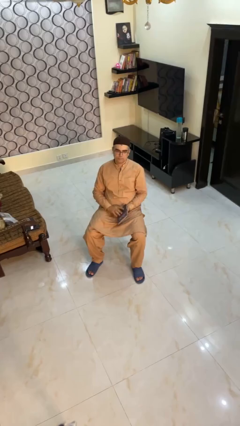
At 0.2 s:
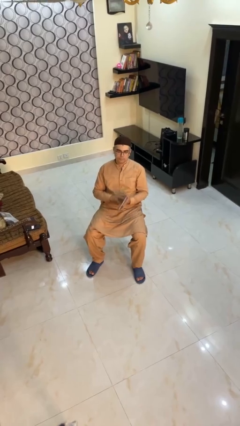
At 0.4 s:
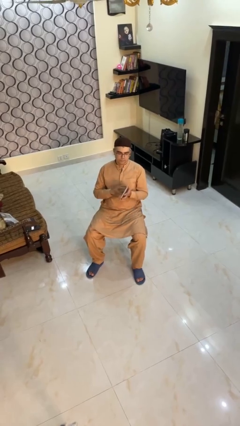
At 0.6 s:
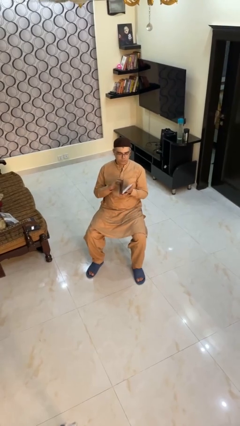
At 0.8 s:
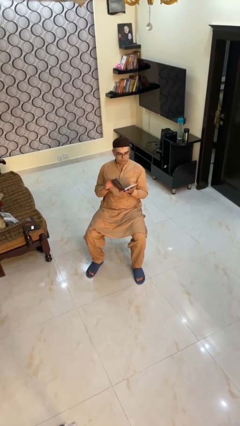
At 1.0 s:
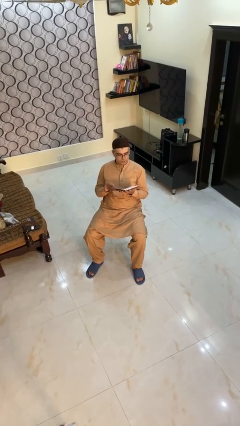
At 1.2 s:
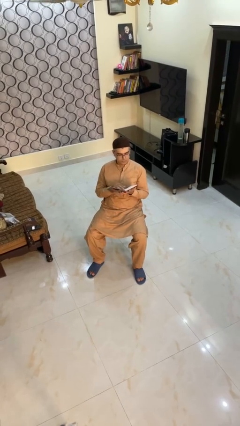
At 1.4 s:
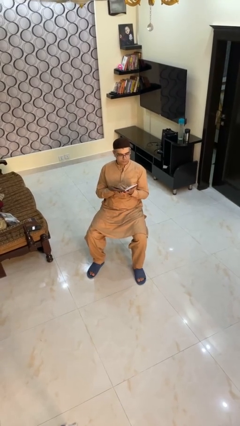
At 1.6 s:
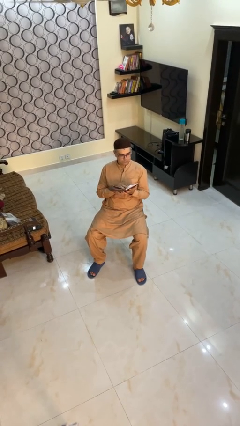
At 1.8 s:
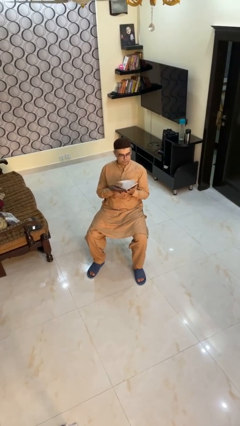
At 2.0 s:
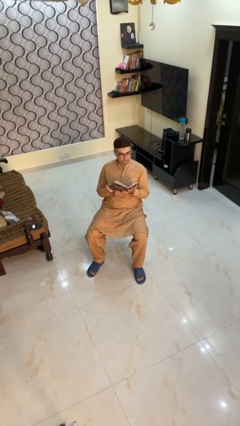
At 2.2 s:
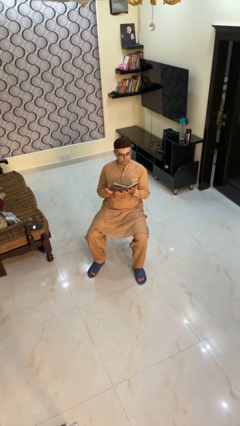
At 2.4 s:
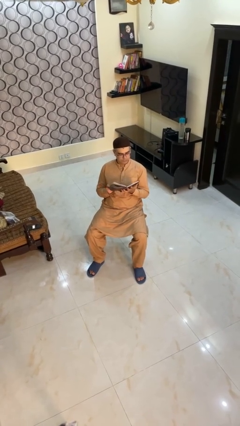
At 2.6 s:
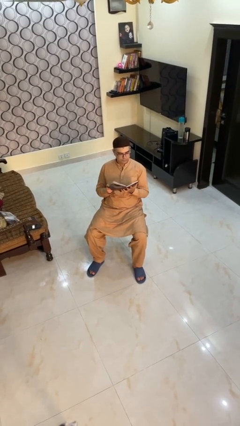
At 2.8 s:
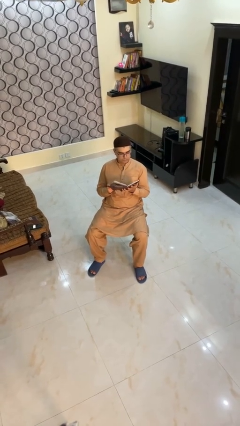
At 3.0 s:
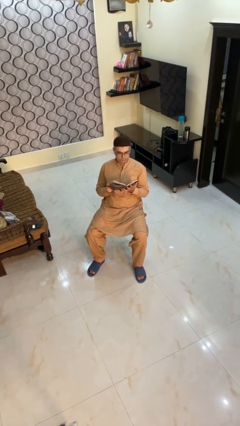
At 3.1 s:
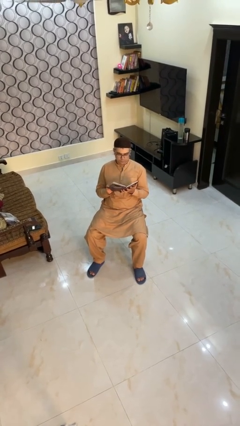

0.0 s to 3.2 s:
person reads book

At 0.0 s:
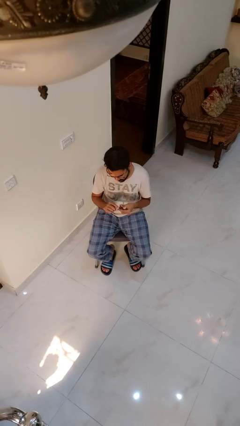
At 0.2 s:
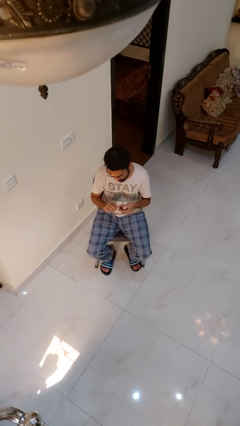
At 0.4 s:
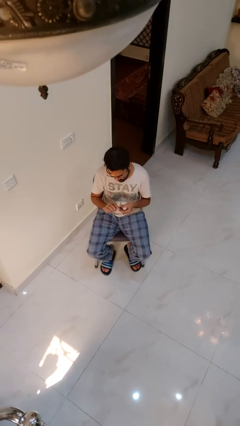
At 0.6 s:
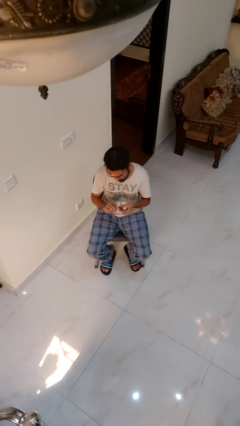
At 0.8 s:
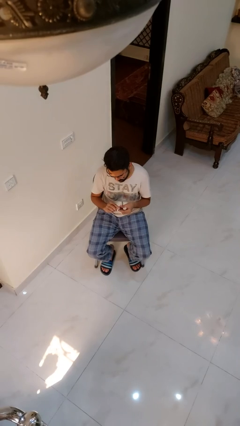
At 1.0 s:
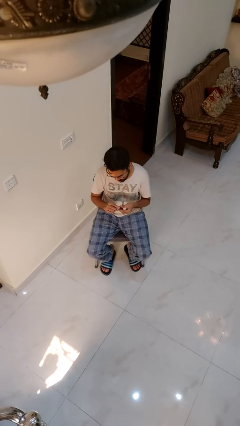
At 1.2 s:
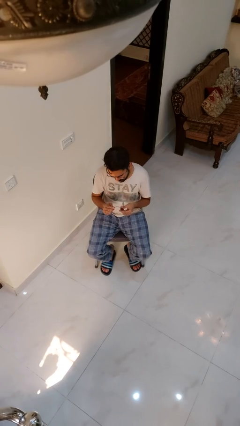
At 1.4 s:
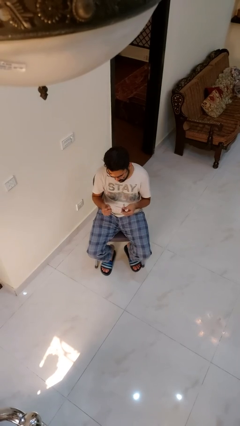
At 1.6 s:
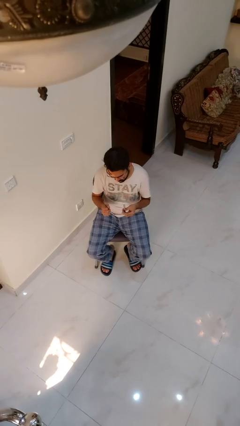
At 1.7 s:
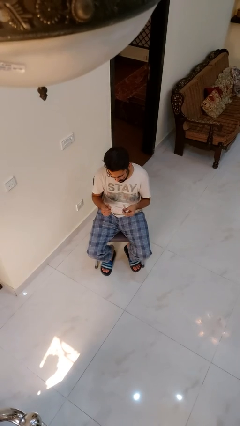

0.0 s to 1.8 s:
person files fingernails

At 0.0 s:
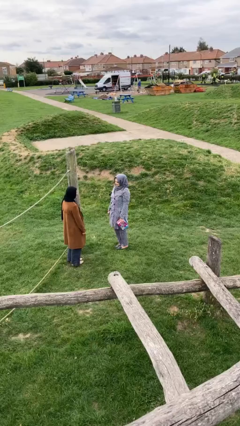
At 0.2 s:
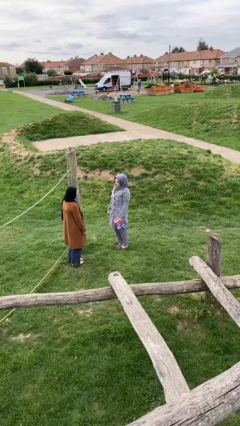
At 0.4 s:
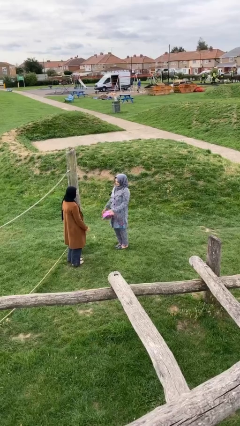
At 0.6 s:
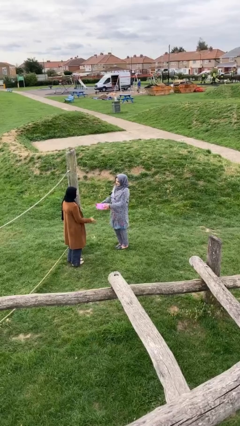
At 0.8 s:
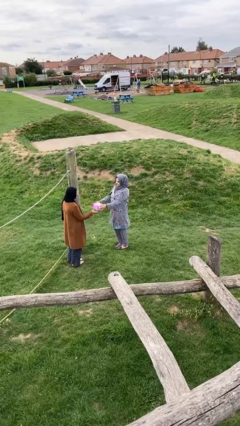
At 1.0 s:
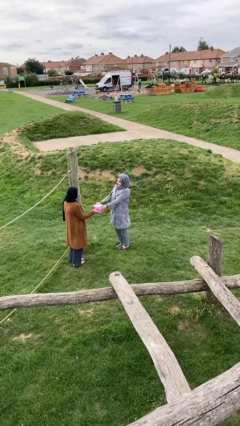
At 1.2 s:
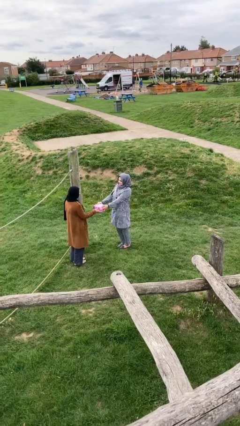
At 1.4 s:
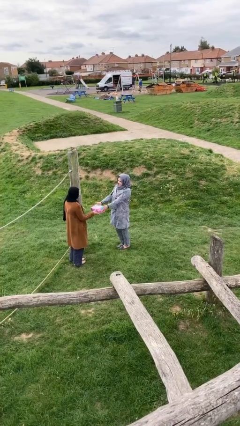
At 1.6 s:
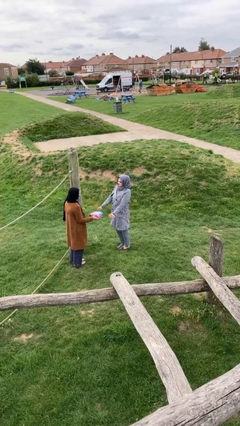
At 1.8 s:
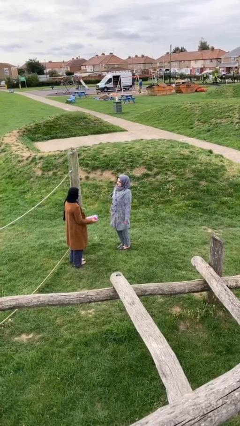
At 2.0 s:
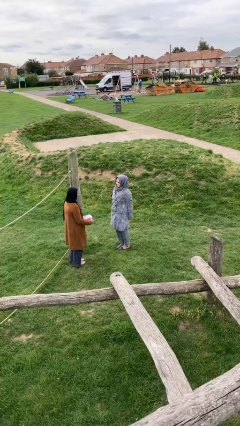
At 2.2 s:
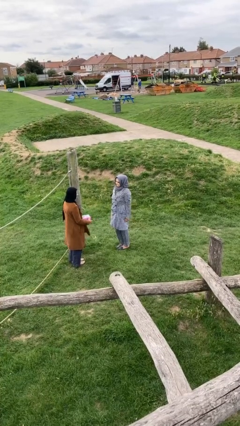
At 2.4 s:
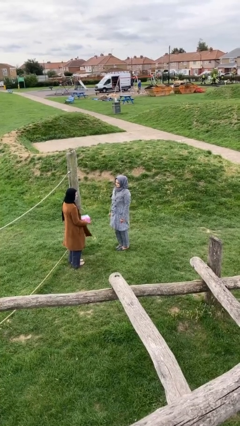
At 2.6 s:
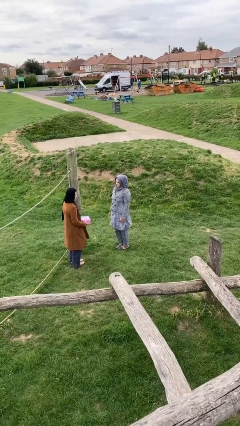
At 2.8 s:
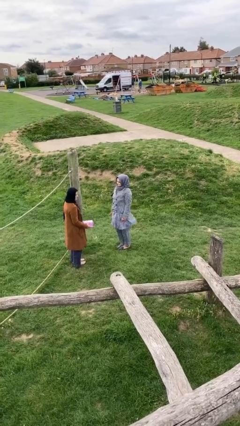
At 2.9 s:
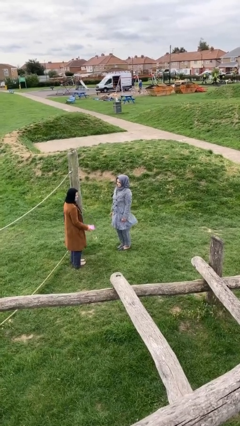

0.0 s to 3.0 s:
person transfers object to person

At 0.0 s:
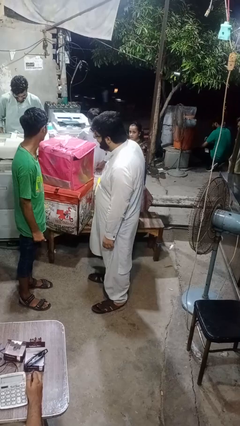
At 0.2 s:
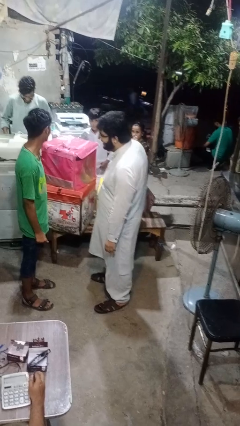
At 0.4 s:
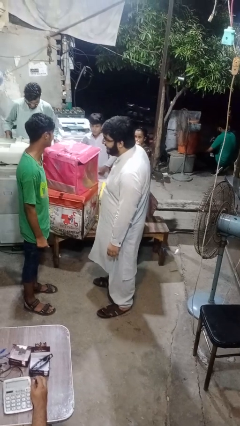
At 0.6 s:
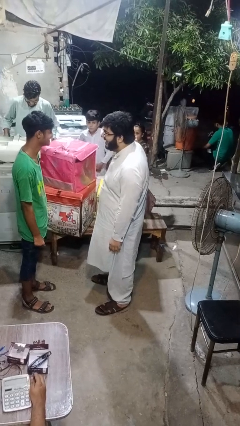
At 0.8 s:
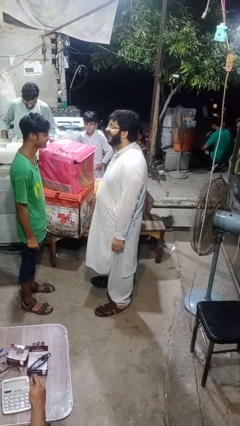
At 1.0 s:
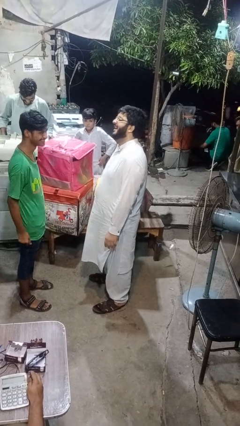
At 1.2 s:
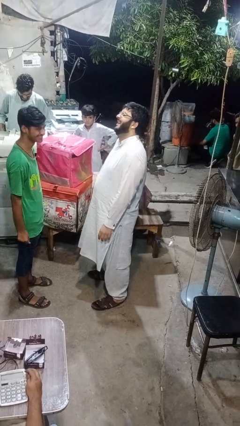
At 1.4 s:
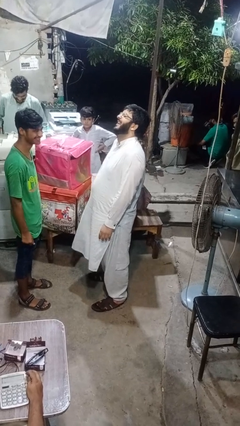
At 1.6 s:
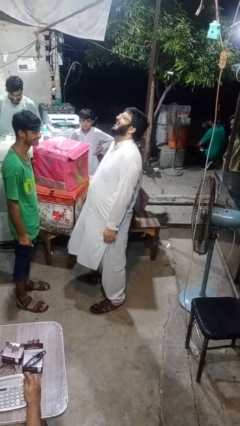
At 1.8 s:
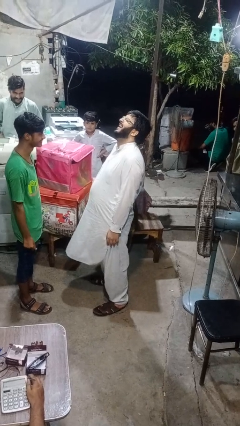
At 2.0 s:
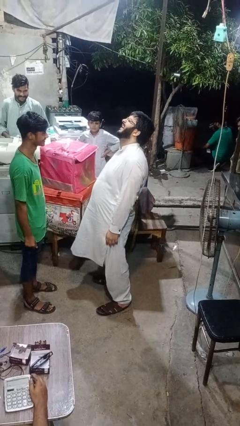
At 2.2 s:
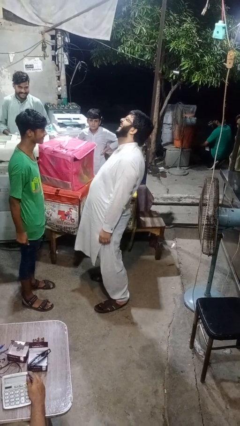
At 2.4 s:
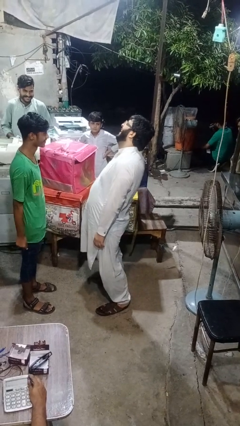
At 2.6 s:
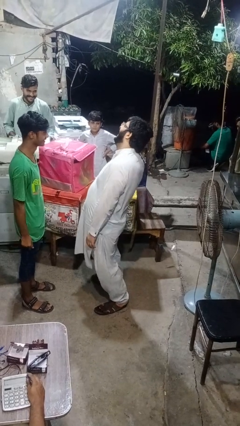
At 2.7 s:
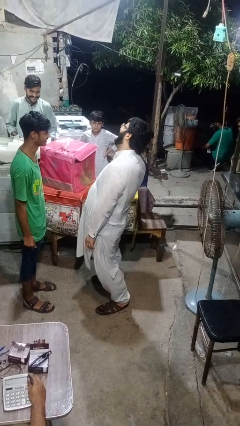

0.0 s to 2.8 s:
person laughs with person

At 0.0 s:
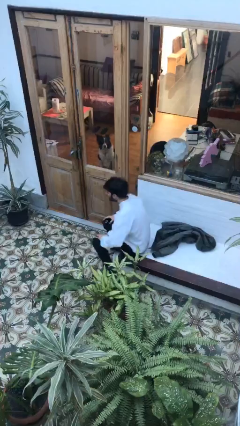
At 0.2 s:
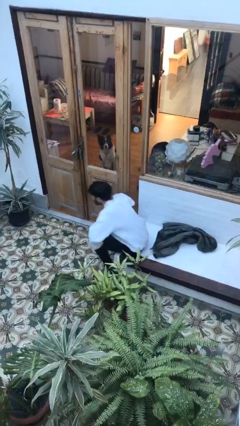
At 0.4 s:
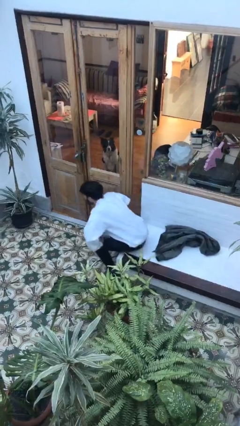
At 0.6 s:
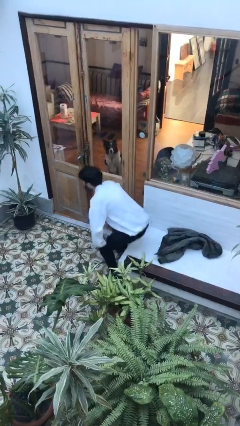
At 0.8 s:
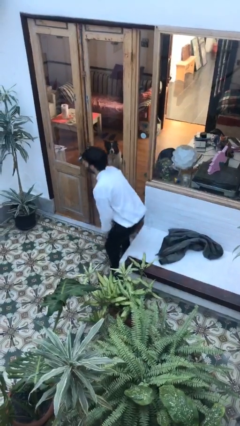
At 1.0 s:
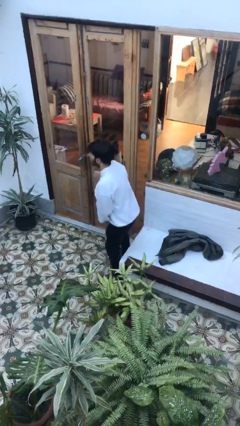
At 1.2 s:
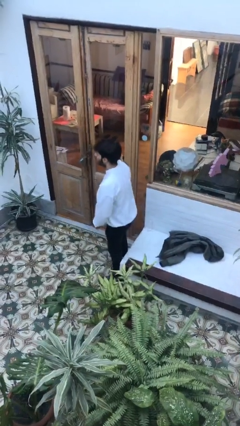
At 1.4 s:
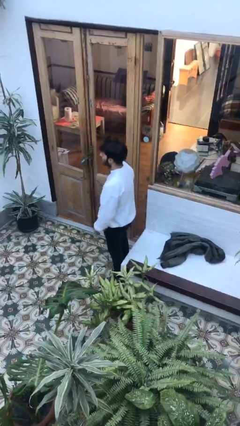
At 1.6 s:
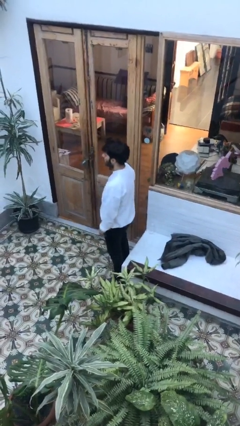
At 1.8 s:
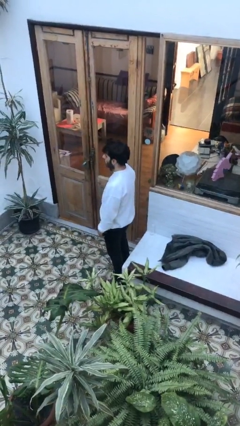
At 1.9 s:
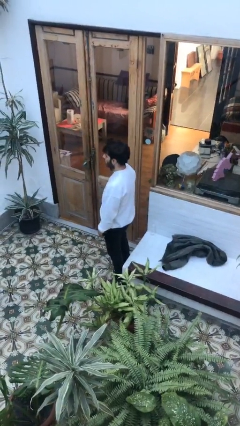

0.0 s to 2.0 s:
person stands up

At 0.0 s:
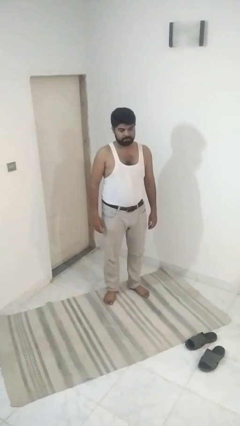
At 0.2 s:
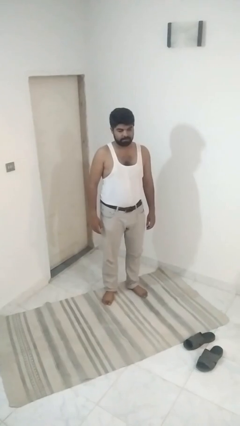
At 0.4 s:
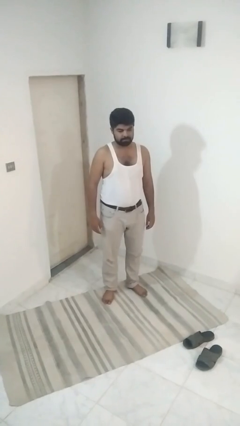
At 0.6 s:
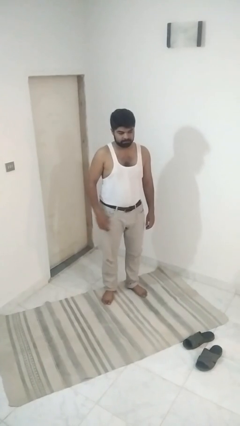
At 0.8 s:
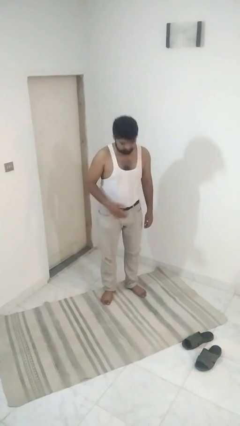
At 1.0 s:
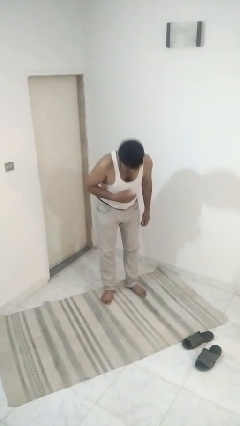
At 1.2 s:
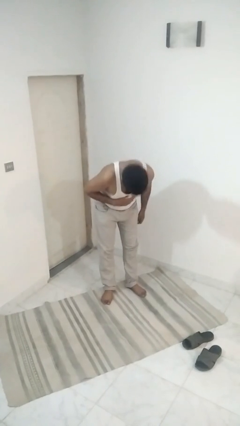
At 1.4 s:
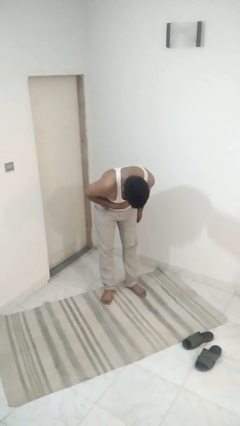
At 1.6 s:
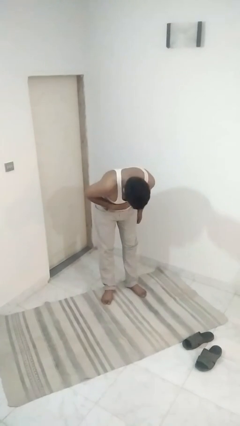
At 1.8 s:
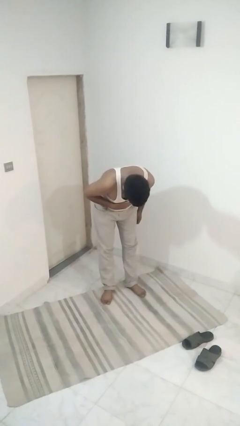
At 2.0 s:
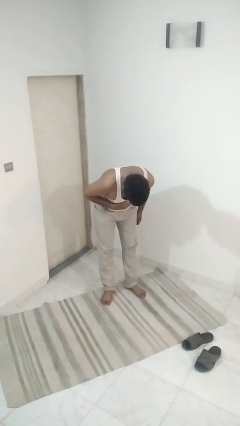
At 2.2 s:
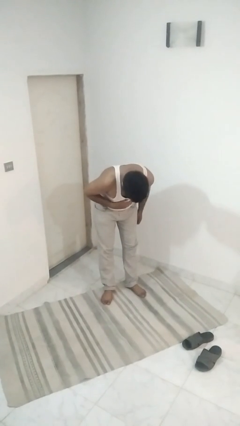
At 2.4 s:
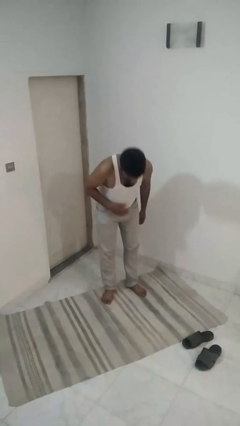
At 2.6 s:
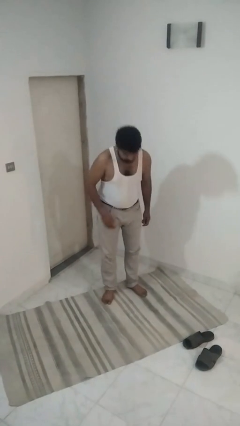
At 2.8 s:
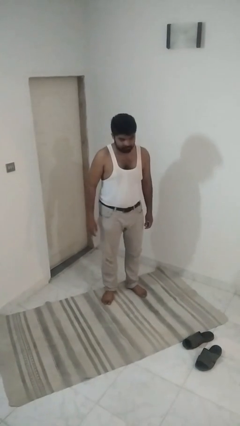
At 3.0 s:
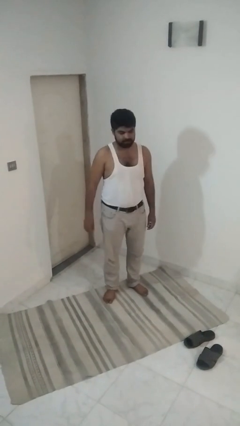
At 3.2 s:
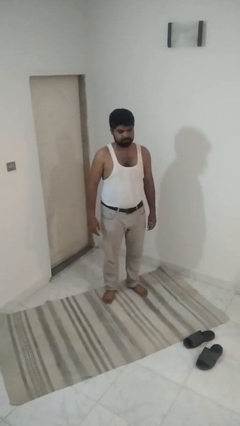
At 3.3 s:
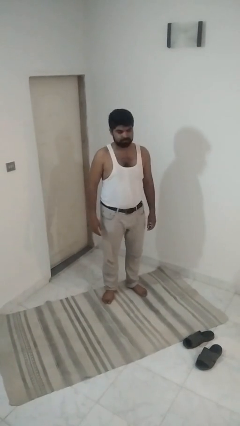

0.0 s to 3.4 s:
person bows

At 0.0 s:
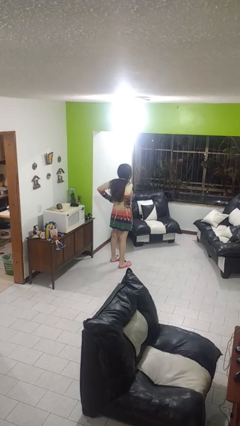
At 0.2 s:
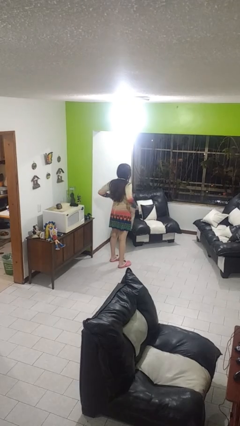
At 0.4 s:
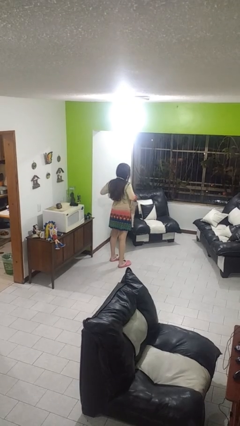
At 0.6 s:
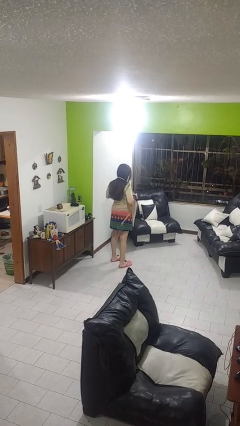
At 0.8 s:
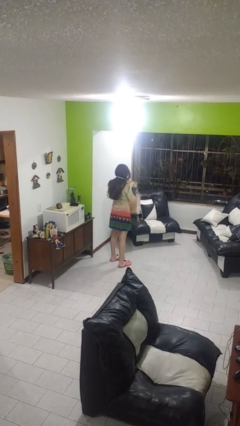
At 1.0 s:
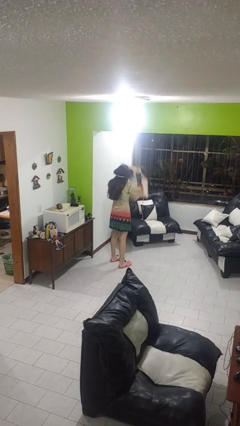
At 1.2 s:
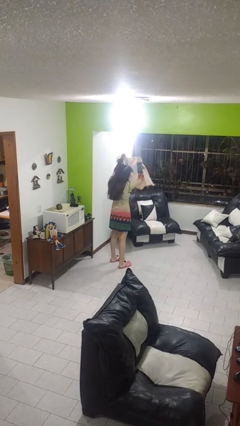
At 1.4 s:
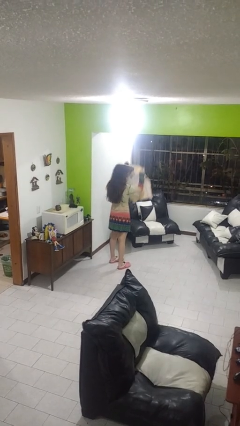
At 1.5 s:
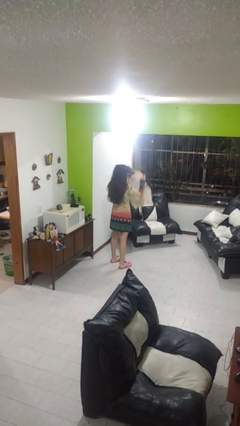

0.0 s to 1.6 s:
person takes off apron
